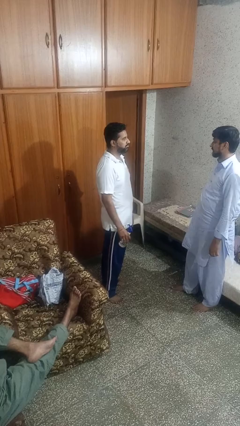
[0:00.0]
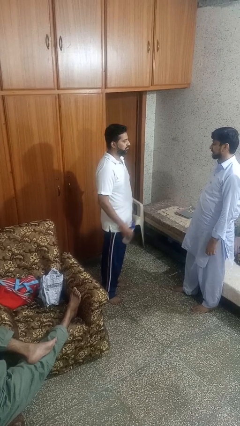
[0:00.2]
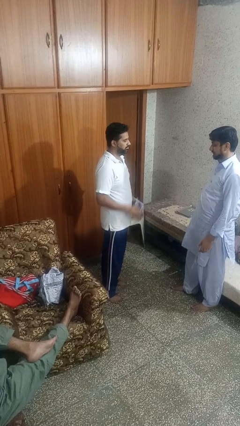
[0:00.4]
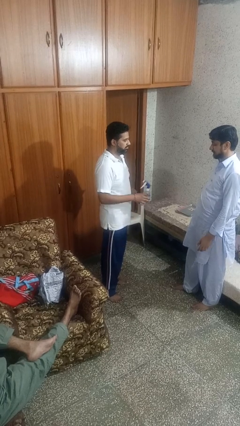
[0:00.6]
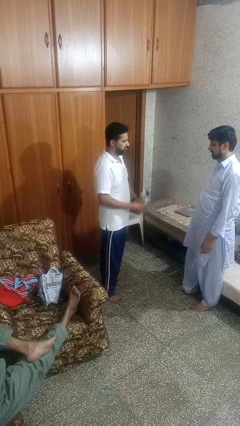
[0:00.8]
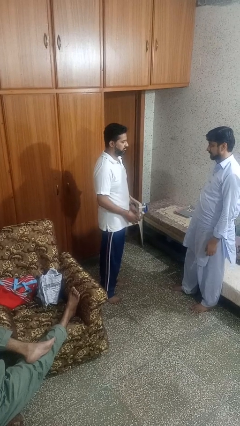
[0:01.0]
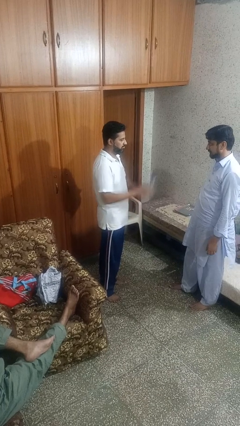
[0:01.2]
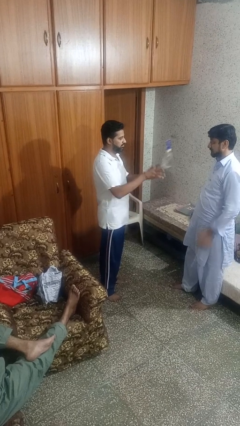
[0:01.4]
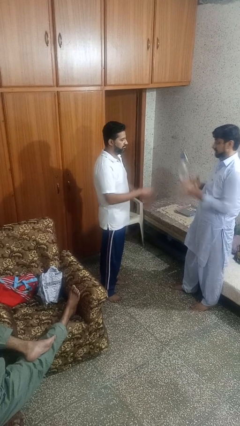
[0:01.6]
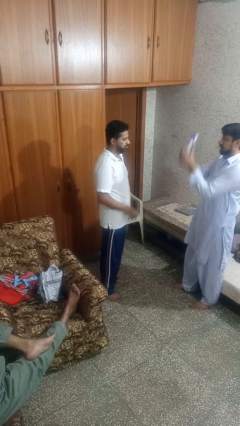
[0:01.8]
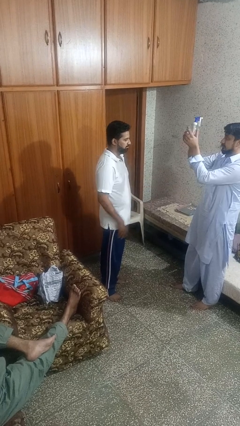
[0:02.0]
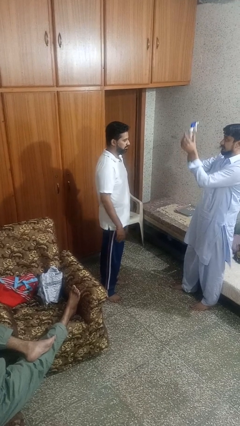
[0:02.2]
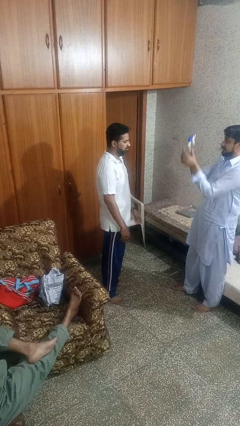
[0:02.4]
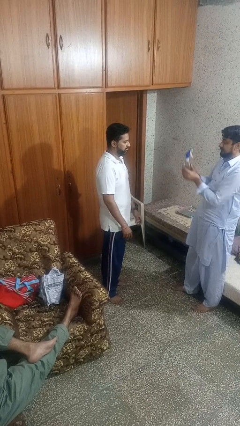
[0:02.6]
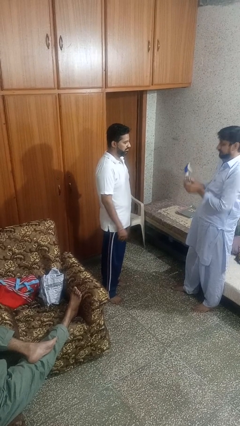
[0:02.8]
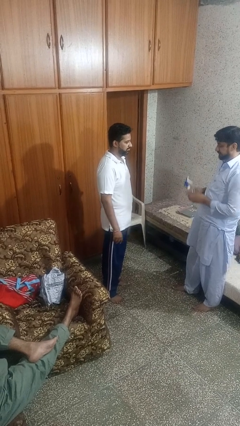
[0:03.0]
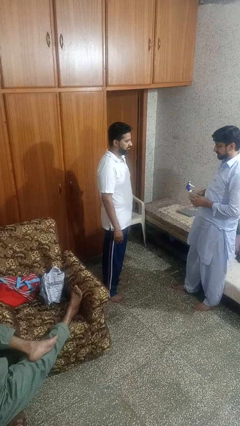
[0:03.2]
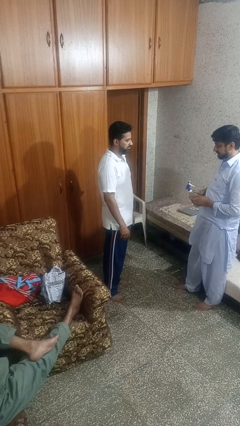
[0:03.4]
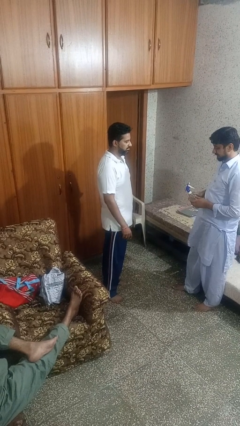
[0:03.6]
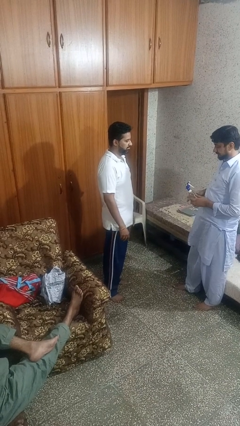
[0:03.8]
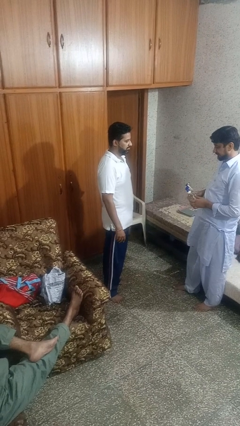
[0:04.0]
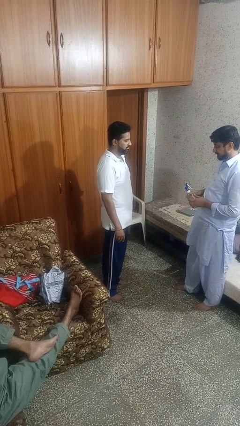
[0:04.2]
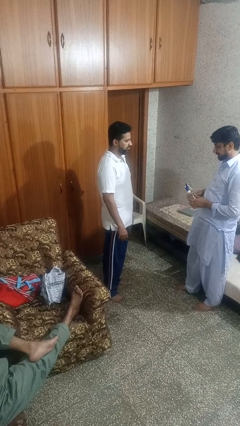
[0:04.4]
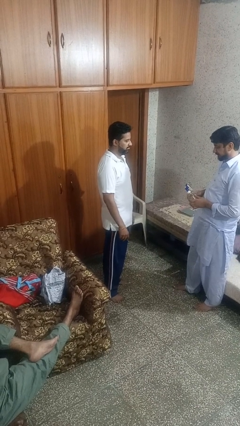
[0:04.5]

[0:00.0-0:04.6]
person throws object to person

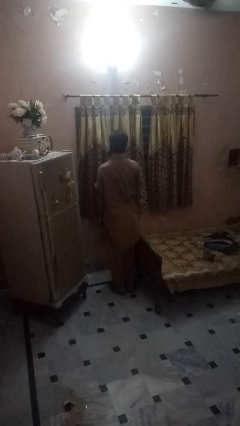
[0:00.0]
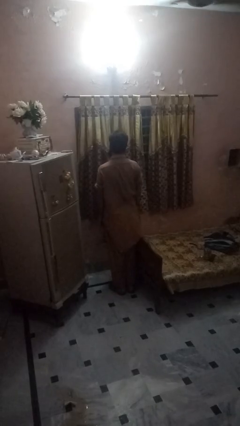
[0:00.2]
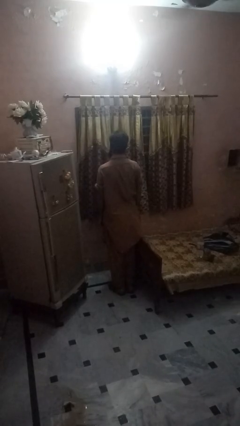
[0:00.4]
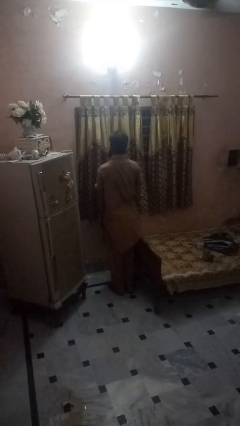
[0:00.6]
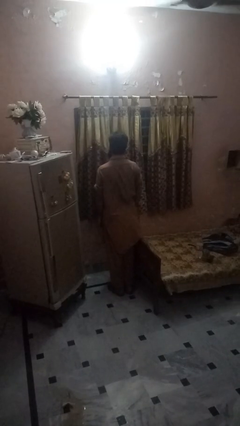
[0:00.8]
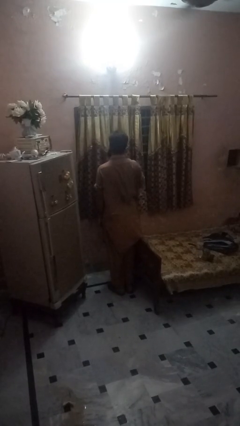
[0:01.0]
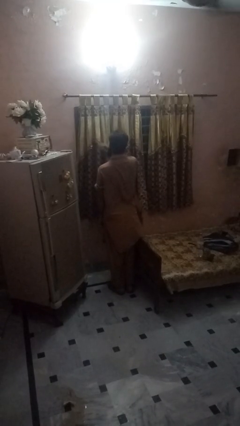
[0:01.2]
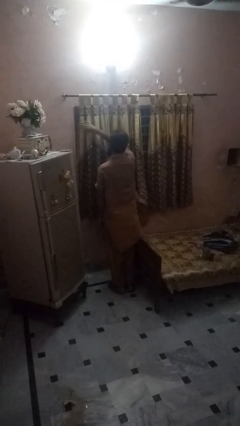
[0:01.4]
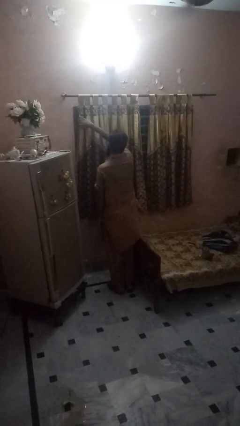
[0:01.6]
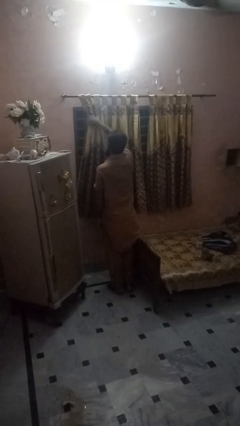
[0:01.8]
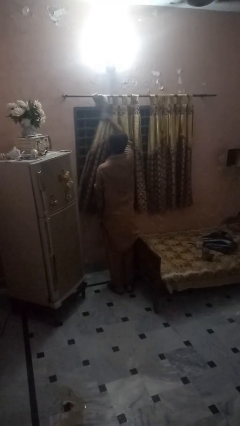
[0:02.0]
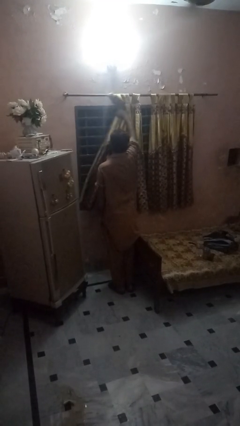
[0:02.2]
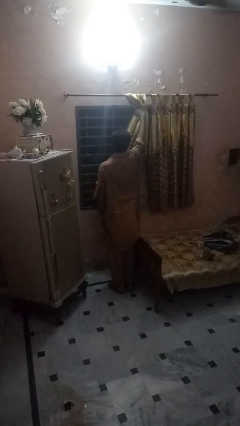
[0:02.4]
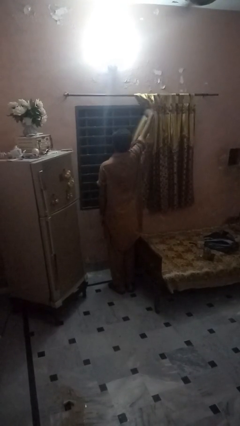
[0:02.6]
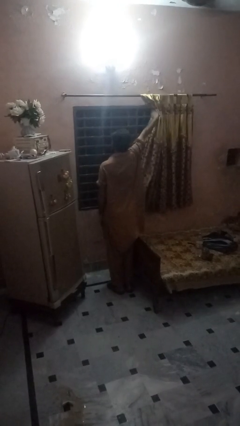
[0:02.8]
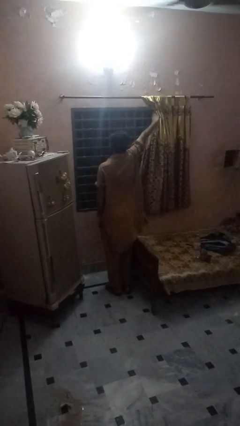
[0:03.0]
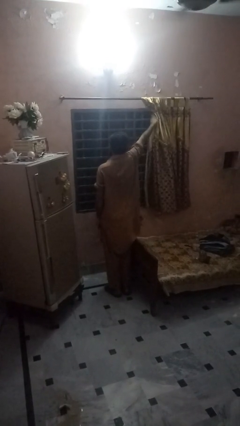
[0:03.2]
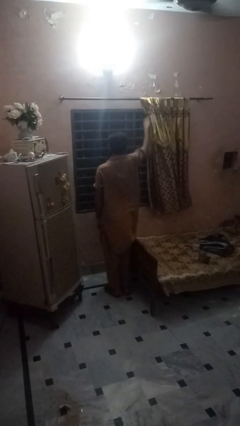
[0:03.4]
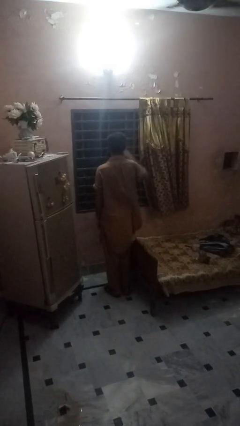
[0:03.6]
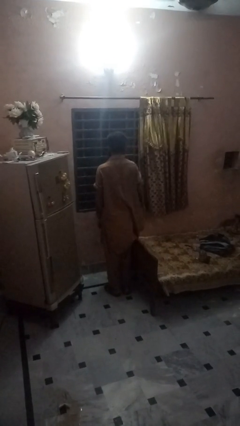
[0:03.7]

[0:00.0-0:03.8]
person opens curtains

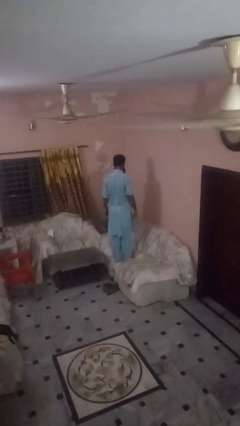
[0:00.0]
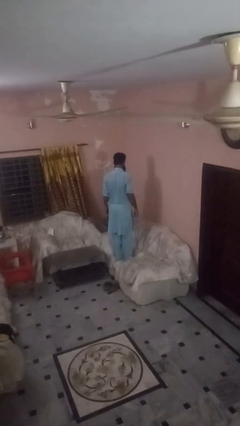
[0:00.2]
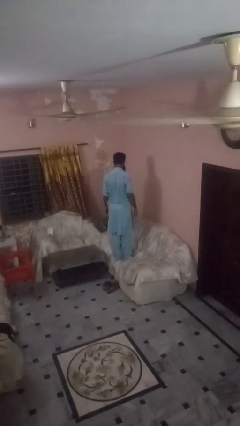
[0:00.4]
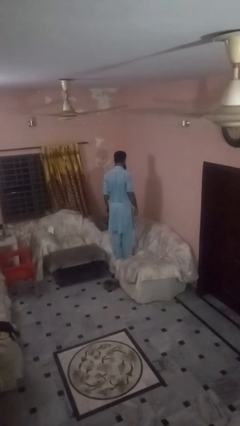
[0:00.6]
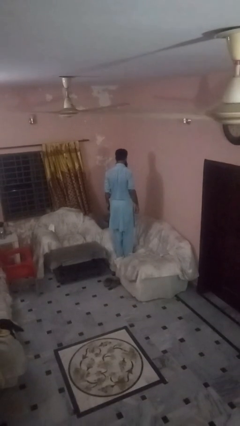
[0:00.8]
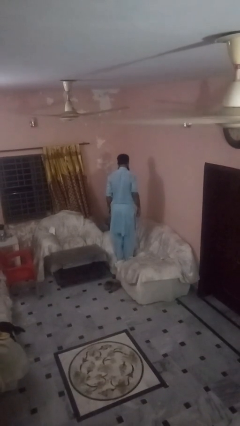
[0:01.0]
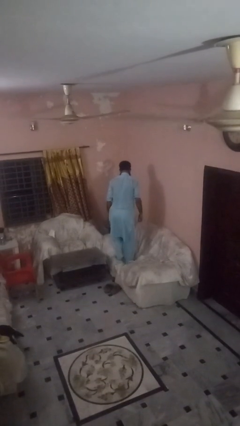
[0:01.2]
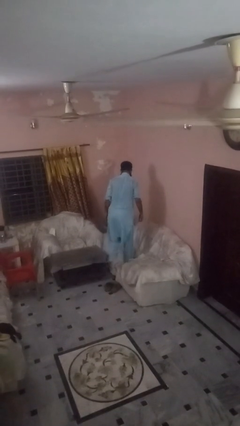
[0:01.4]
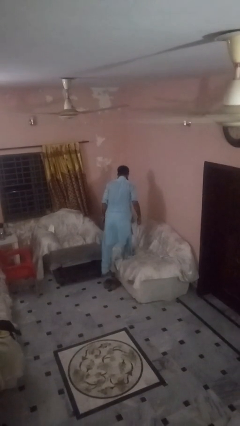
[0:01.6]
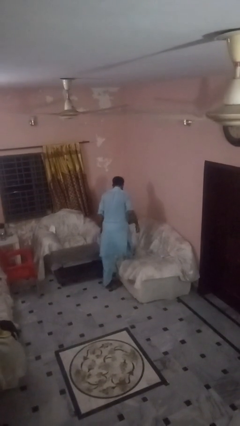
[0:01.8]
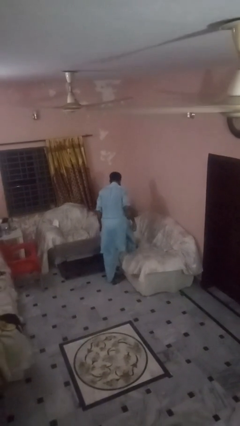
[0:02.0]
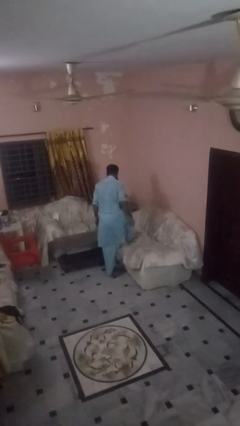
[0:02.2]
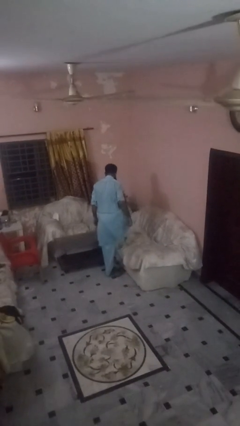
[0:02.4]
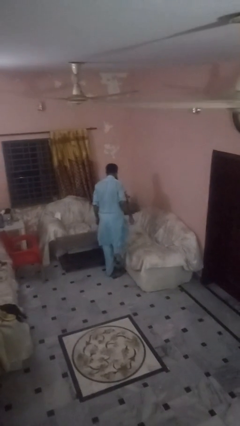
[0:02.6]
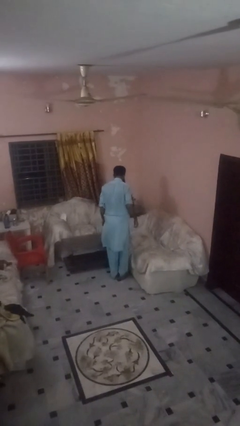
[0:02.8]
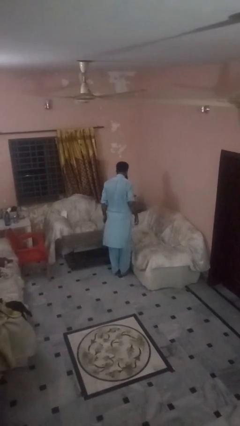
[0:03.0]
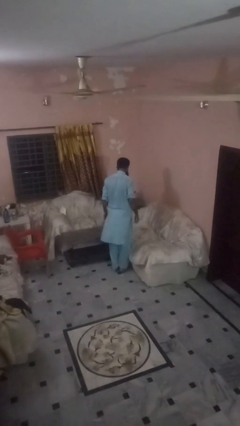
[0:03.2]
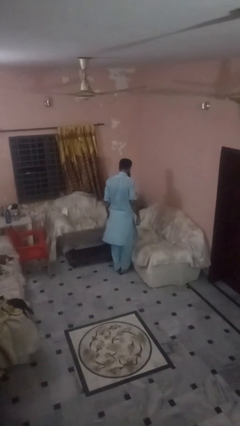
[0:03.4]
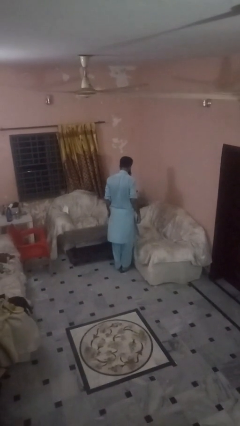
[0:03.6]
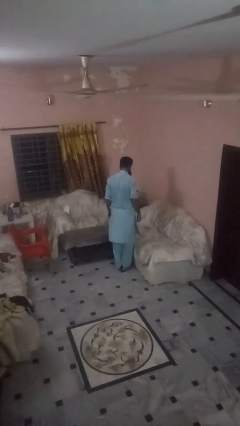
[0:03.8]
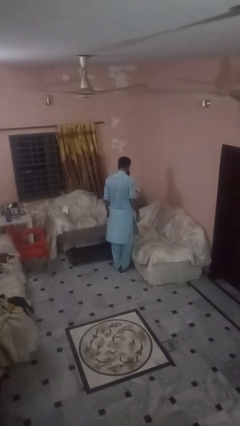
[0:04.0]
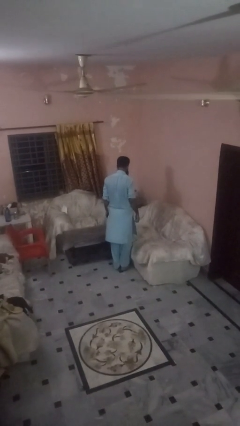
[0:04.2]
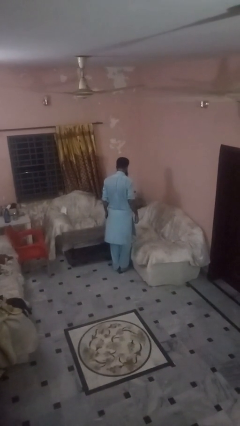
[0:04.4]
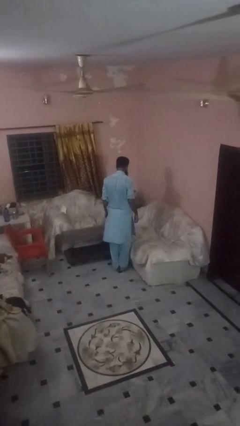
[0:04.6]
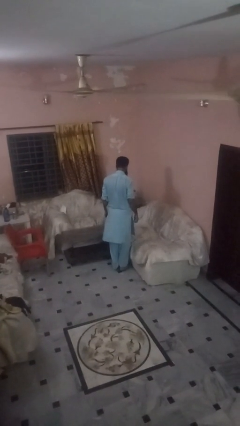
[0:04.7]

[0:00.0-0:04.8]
person climbs off couch

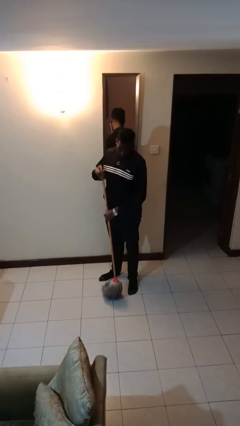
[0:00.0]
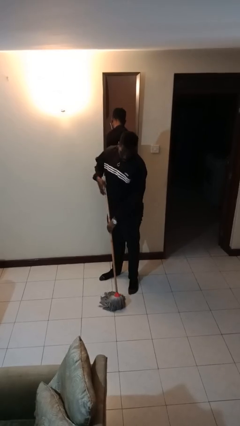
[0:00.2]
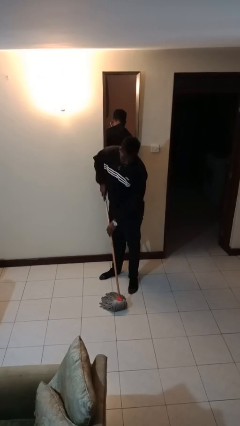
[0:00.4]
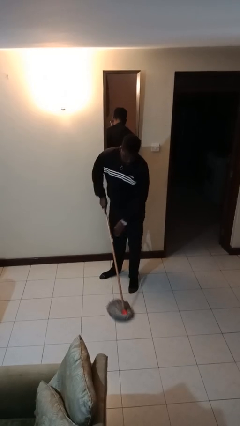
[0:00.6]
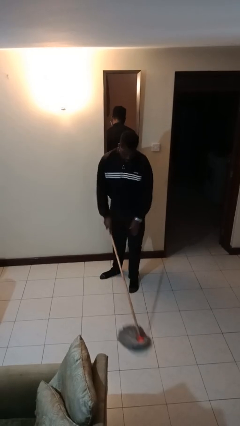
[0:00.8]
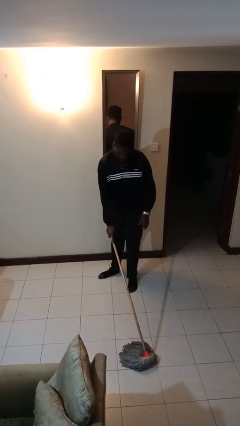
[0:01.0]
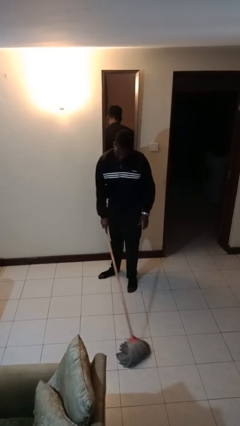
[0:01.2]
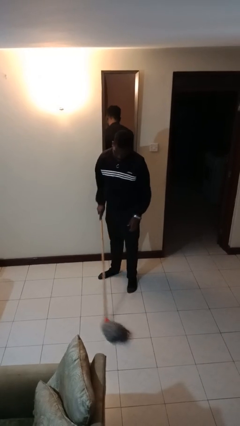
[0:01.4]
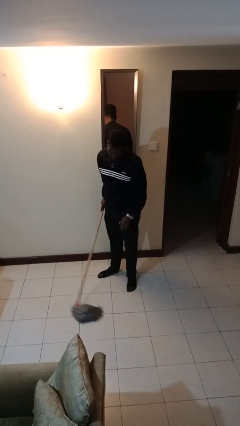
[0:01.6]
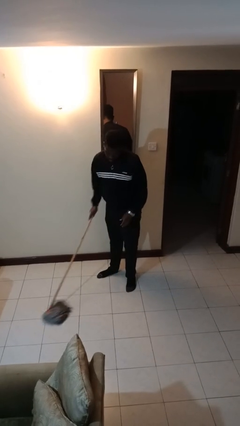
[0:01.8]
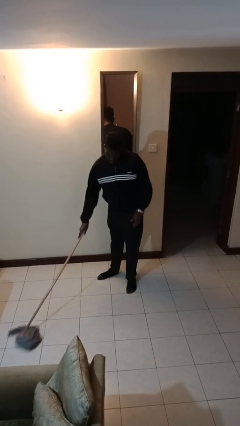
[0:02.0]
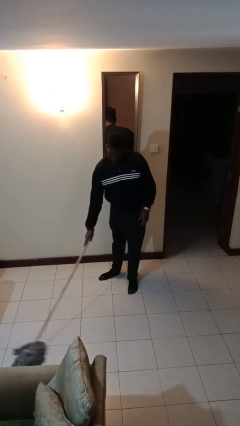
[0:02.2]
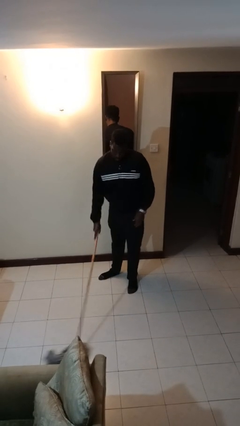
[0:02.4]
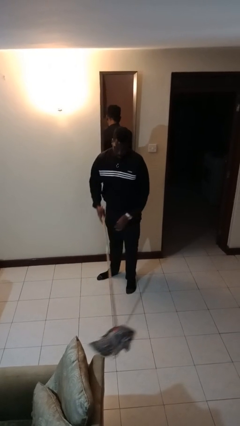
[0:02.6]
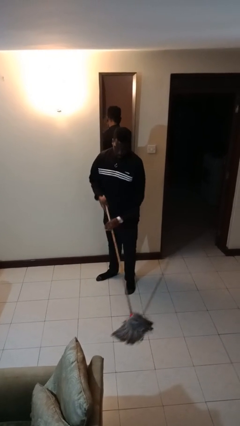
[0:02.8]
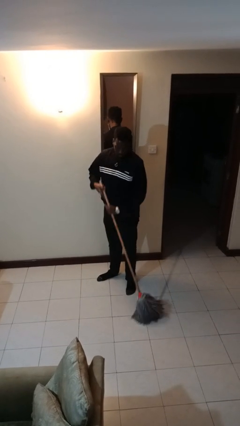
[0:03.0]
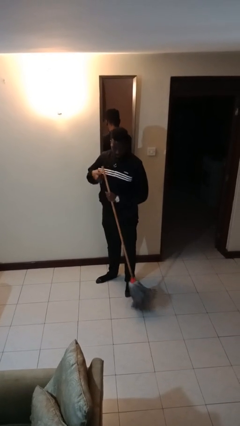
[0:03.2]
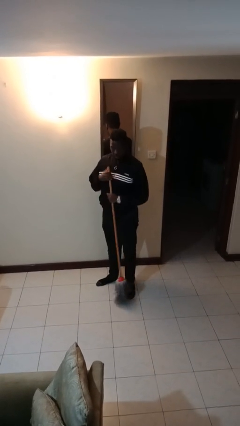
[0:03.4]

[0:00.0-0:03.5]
person mops

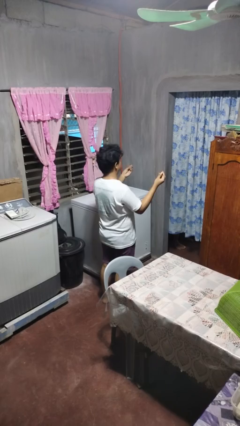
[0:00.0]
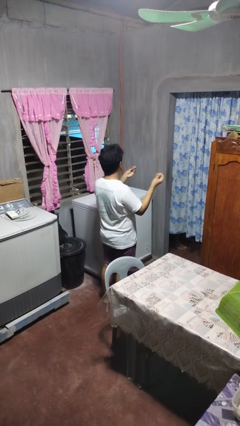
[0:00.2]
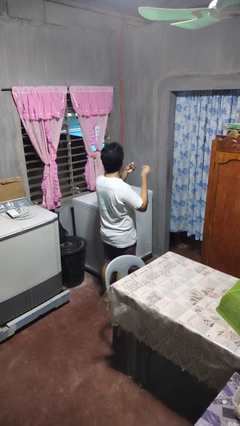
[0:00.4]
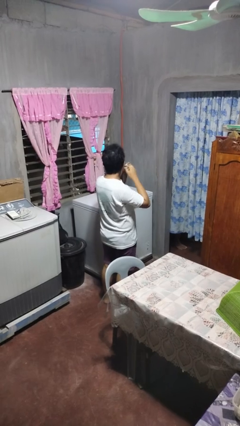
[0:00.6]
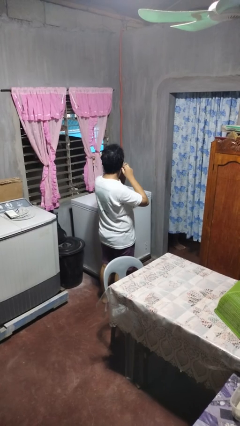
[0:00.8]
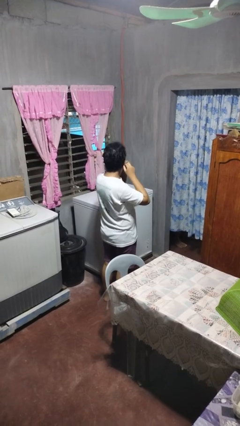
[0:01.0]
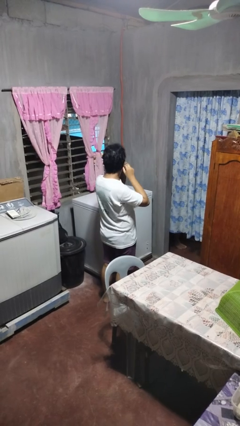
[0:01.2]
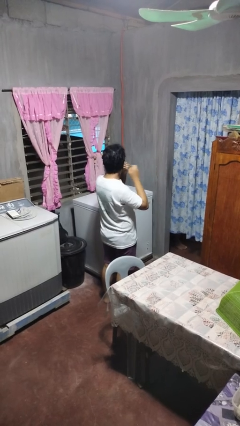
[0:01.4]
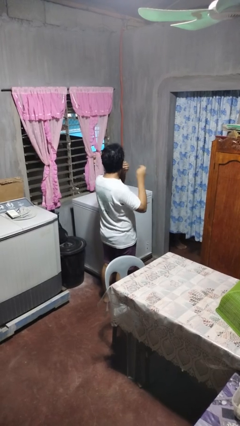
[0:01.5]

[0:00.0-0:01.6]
person puts on earrings
